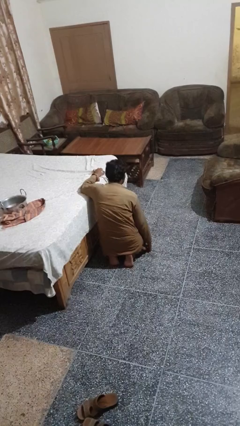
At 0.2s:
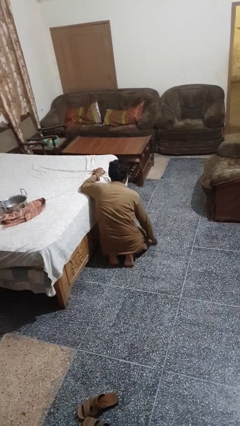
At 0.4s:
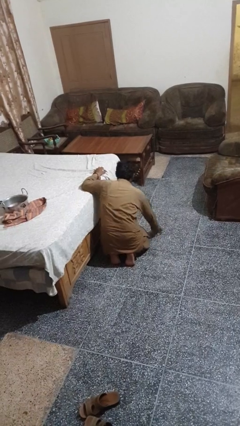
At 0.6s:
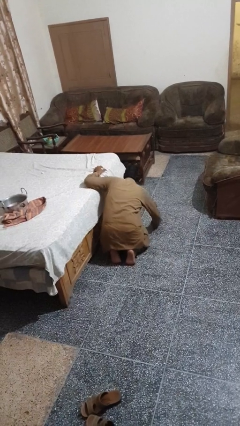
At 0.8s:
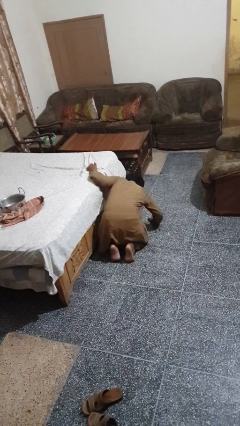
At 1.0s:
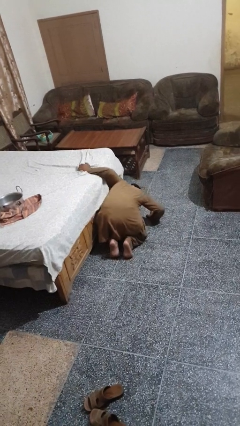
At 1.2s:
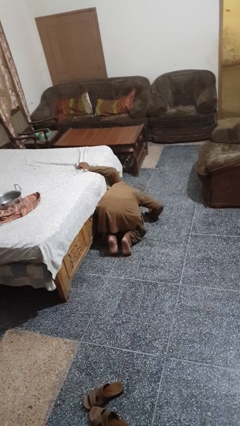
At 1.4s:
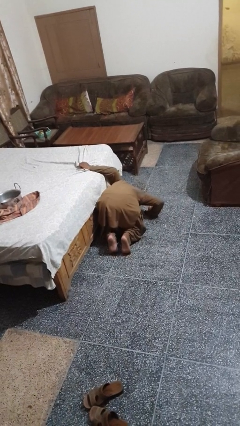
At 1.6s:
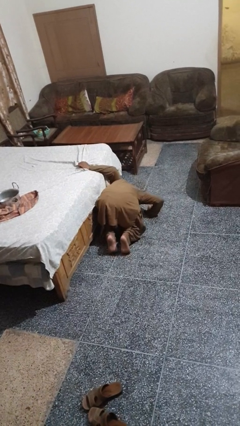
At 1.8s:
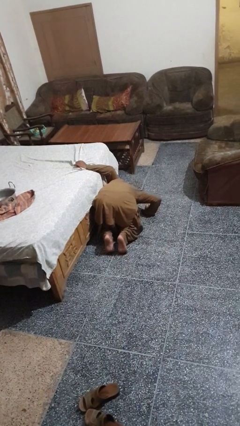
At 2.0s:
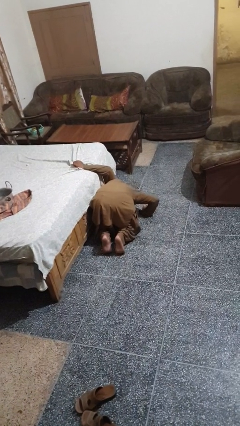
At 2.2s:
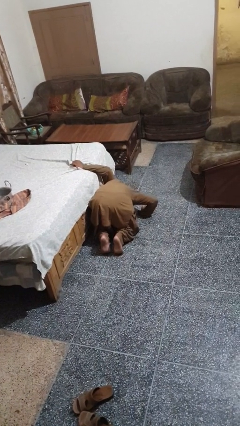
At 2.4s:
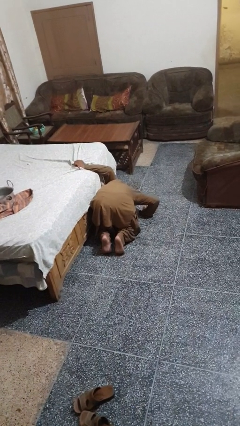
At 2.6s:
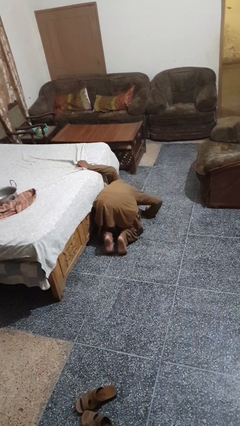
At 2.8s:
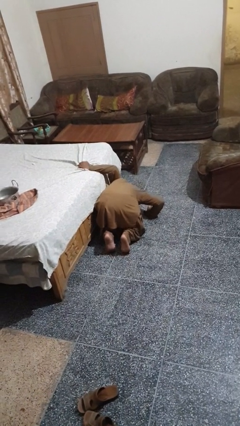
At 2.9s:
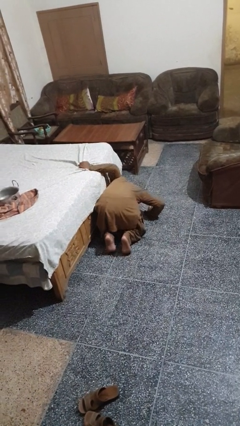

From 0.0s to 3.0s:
person searches under bed

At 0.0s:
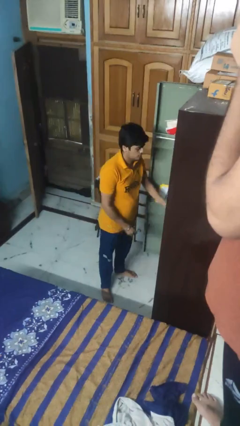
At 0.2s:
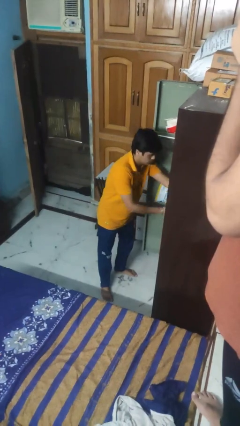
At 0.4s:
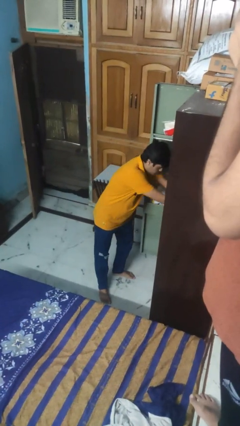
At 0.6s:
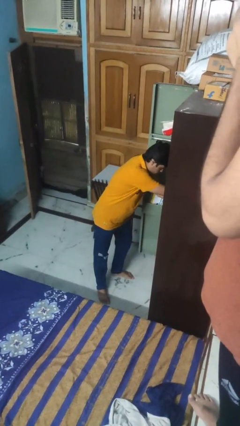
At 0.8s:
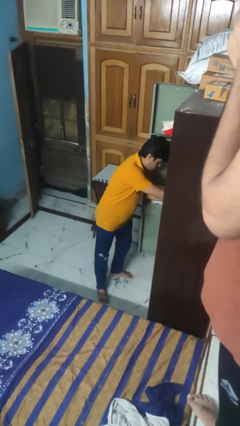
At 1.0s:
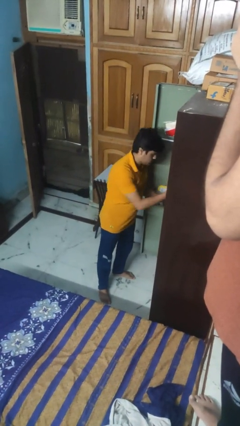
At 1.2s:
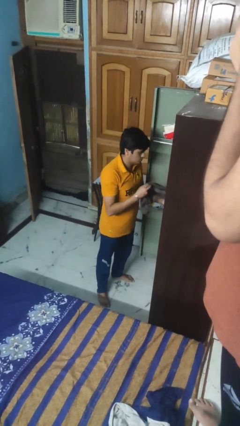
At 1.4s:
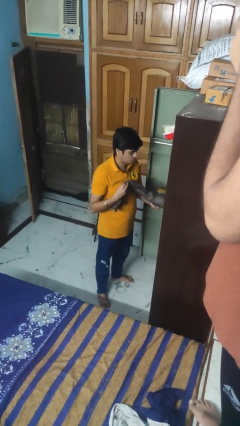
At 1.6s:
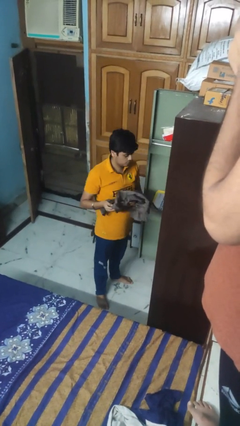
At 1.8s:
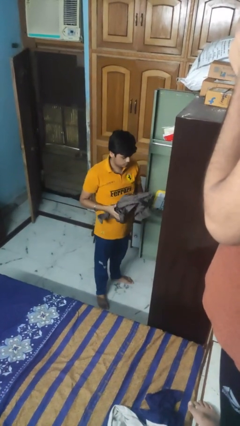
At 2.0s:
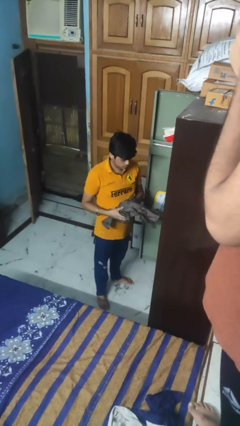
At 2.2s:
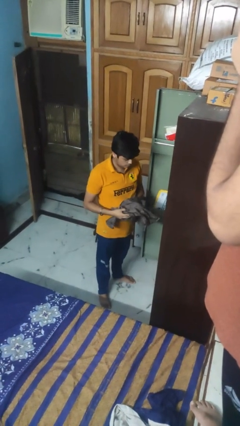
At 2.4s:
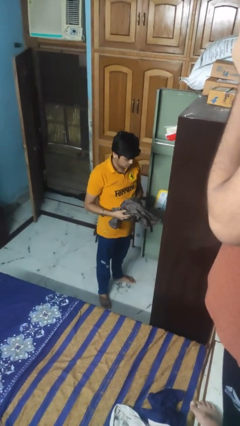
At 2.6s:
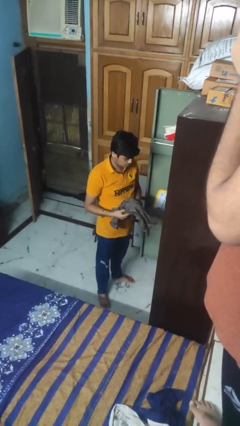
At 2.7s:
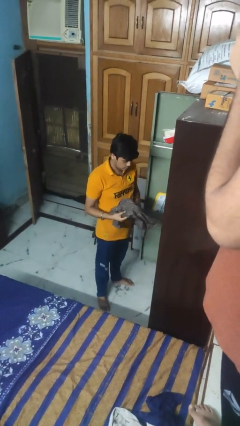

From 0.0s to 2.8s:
person takes clothes from dresser

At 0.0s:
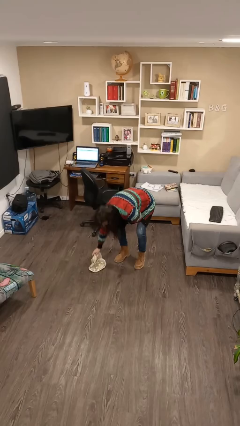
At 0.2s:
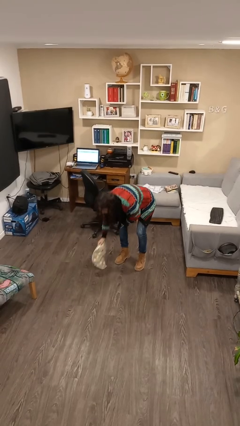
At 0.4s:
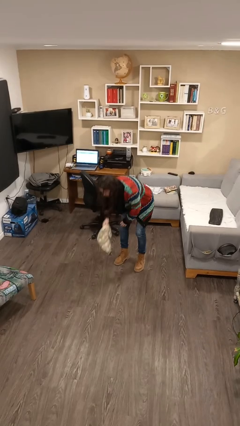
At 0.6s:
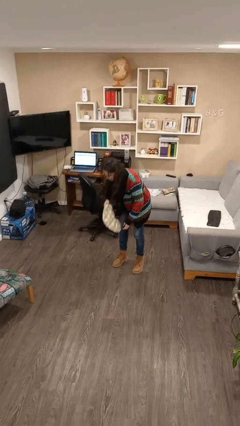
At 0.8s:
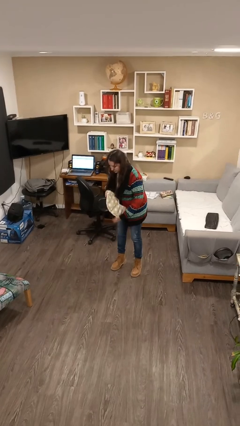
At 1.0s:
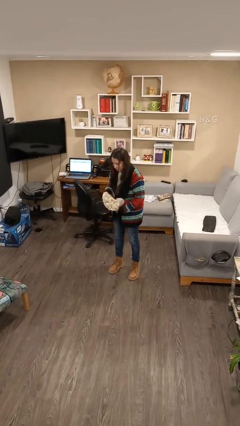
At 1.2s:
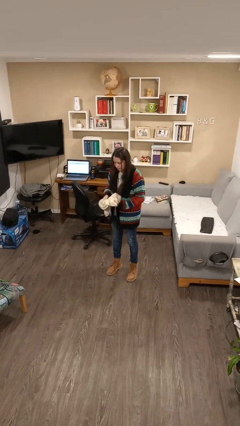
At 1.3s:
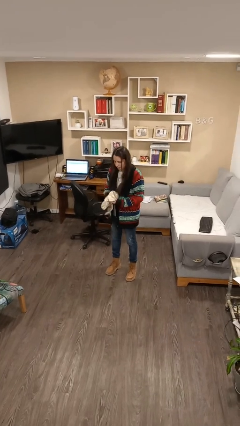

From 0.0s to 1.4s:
person picks up object from floor

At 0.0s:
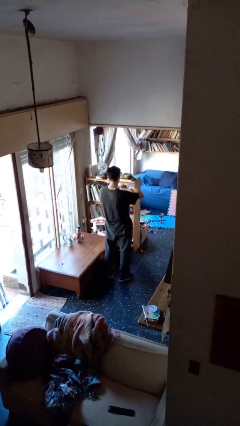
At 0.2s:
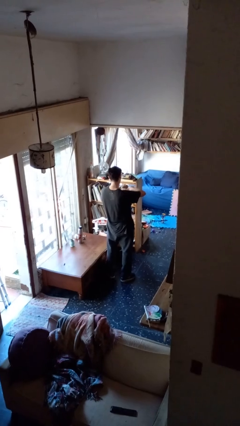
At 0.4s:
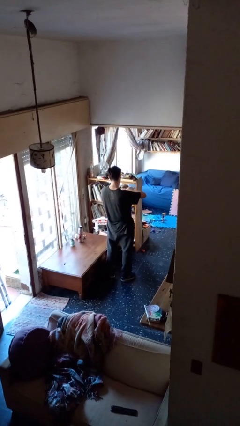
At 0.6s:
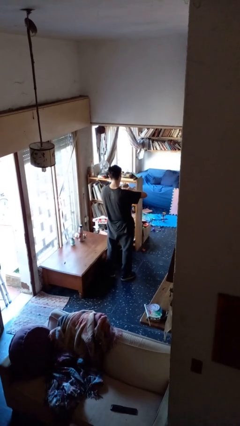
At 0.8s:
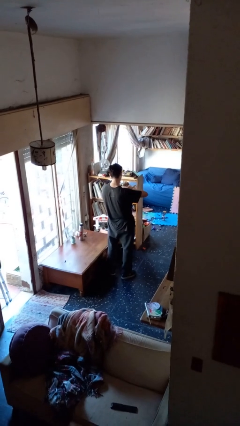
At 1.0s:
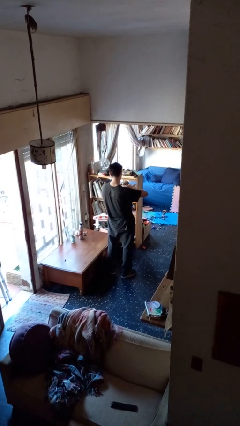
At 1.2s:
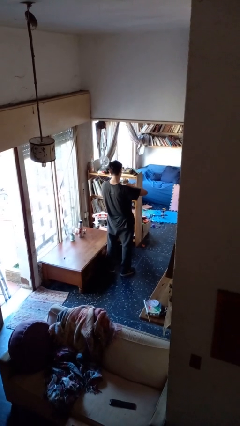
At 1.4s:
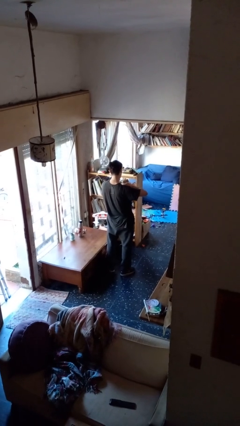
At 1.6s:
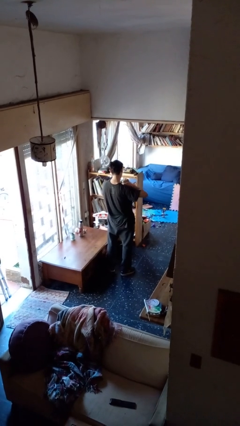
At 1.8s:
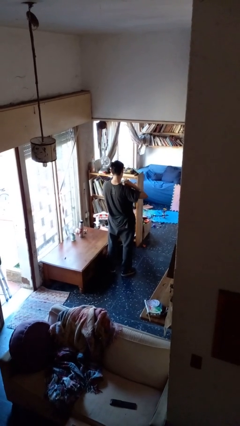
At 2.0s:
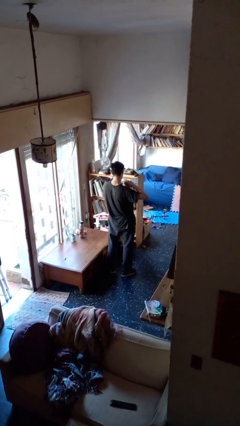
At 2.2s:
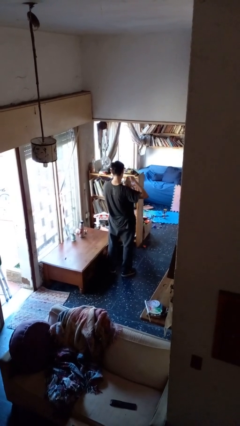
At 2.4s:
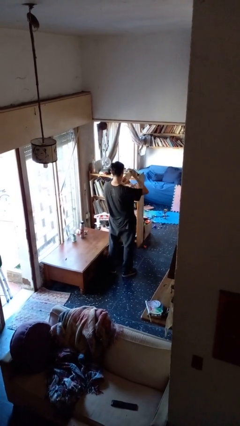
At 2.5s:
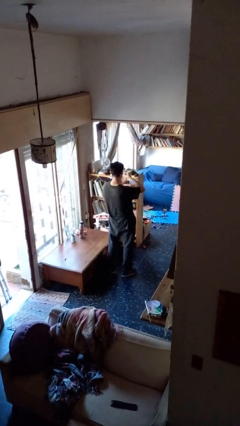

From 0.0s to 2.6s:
person tears paper

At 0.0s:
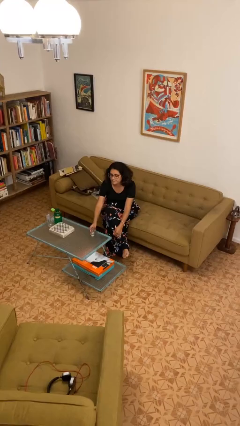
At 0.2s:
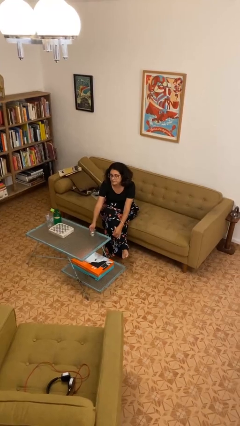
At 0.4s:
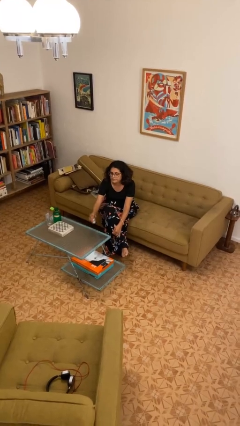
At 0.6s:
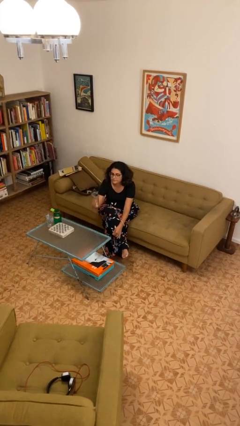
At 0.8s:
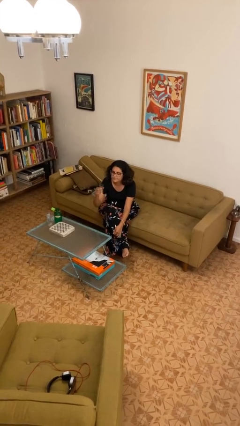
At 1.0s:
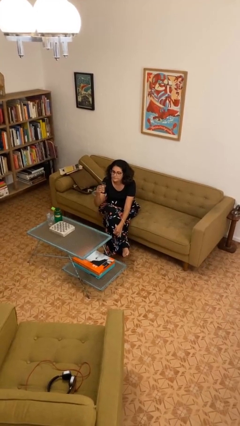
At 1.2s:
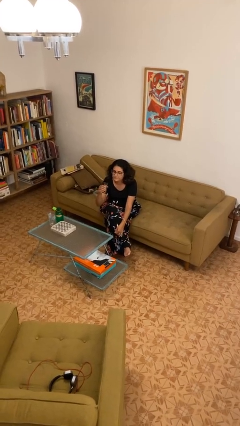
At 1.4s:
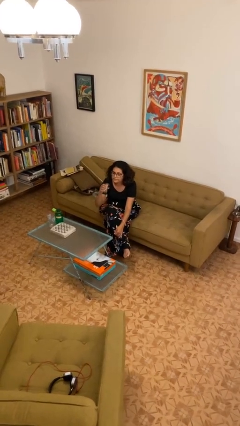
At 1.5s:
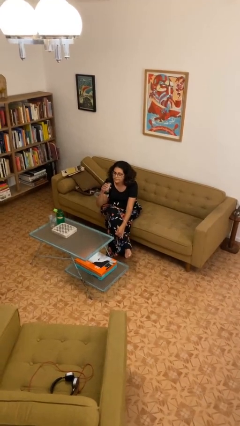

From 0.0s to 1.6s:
person picks up object from table

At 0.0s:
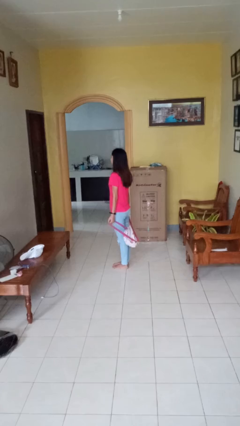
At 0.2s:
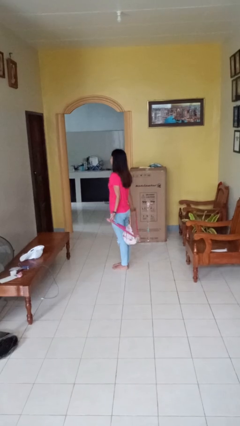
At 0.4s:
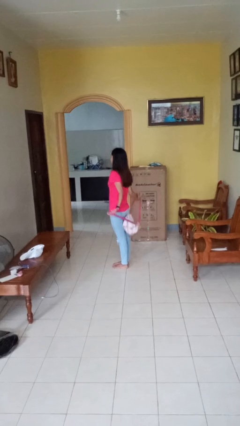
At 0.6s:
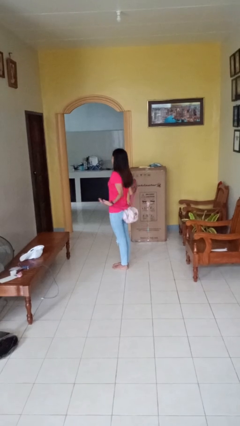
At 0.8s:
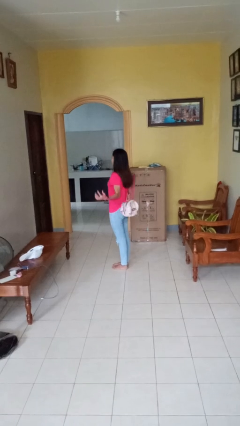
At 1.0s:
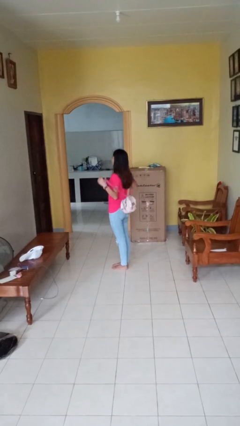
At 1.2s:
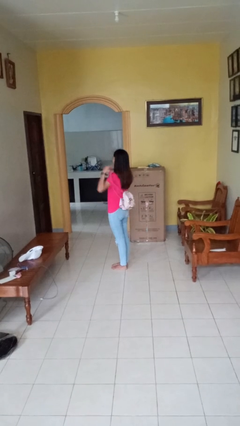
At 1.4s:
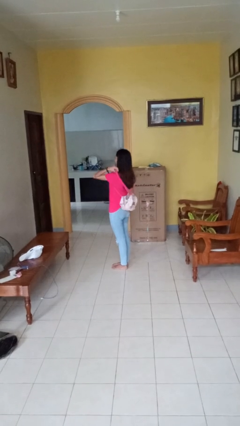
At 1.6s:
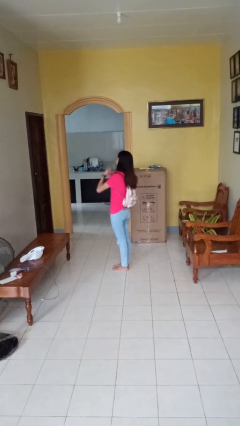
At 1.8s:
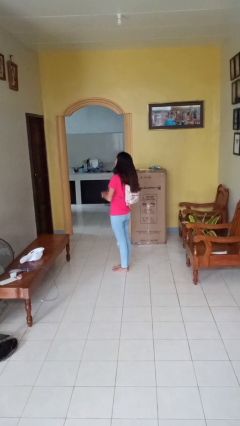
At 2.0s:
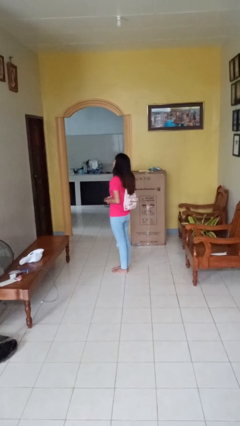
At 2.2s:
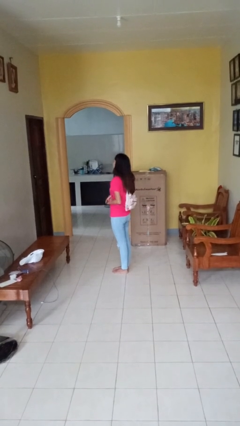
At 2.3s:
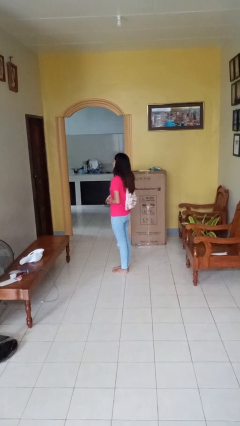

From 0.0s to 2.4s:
person puts on backpack

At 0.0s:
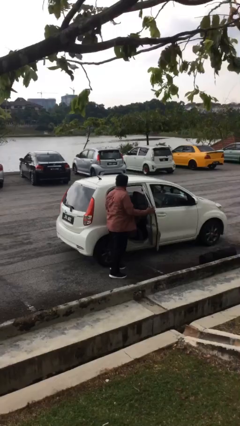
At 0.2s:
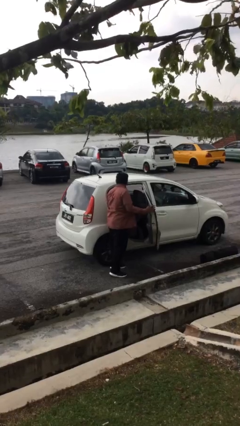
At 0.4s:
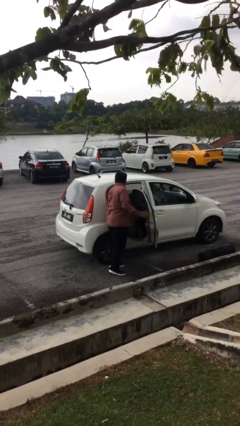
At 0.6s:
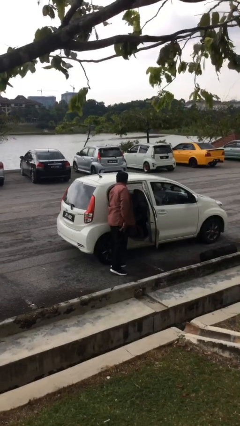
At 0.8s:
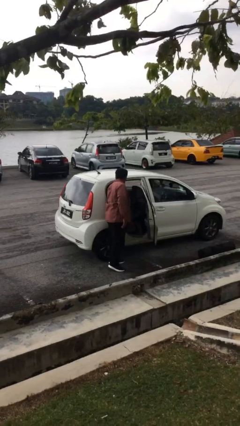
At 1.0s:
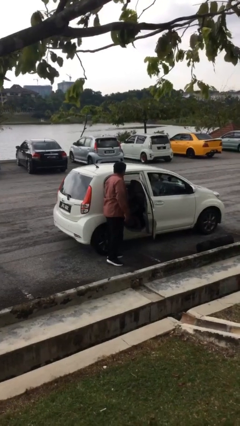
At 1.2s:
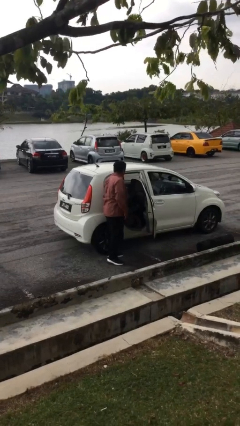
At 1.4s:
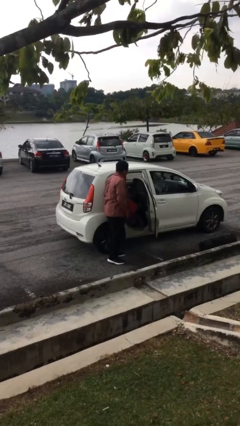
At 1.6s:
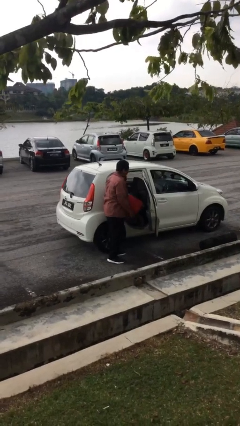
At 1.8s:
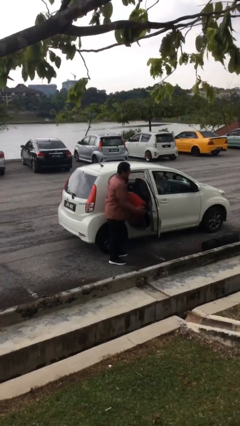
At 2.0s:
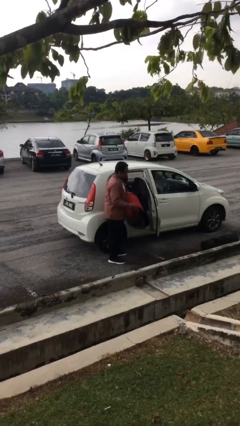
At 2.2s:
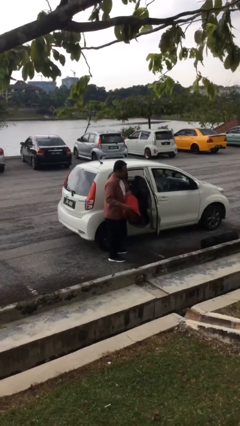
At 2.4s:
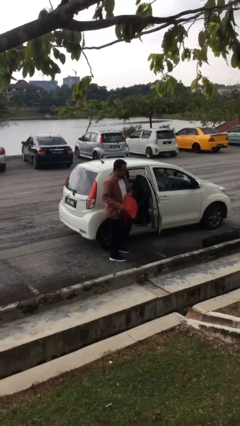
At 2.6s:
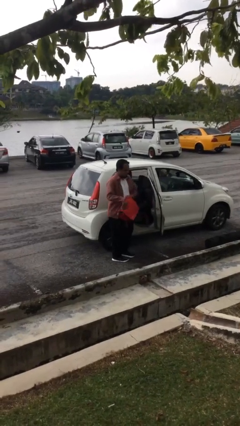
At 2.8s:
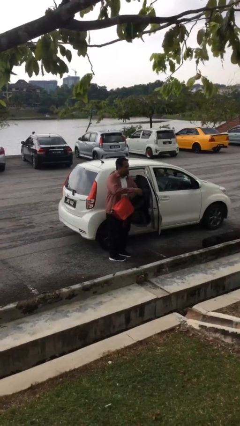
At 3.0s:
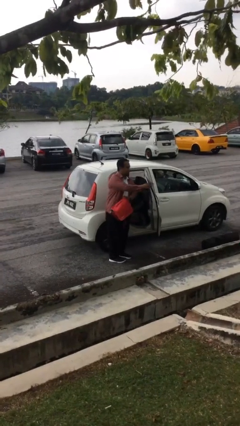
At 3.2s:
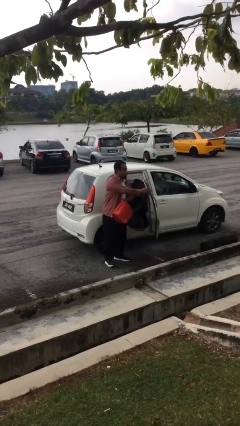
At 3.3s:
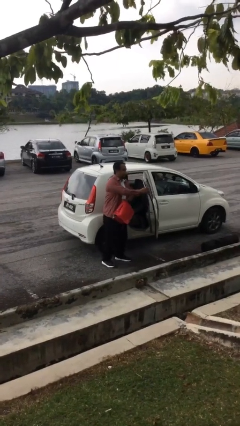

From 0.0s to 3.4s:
person unloads car
